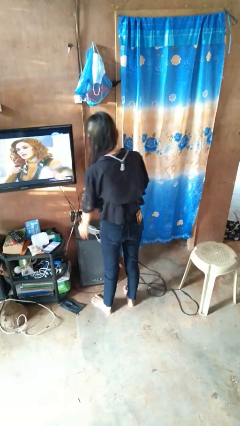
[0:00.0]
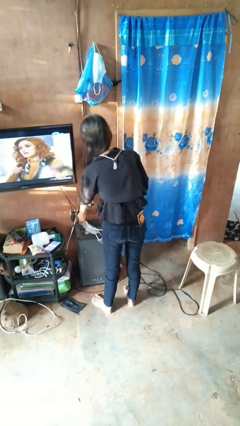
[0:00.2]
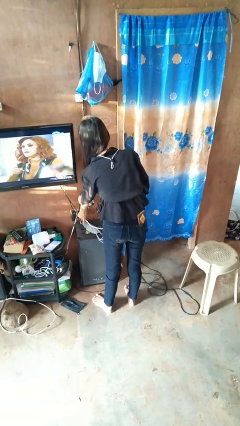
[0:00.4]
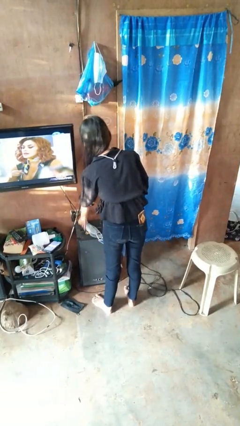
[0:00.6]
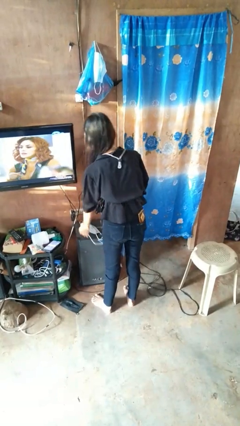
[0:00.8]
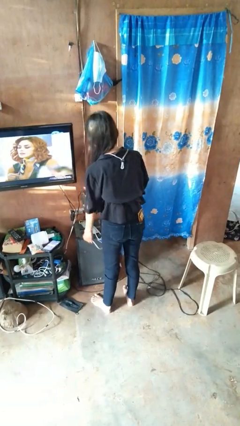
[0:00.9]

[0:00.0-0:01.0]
person unplugs from electrical socket

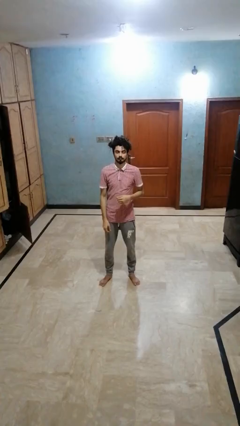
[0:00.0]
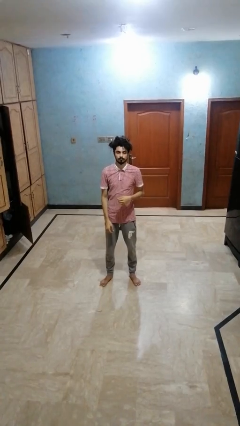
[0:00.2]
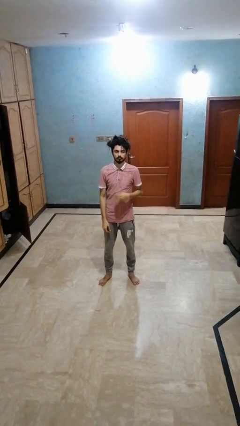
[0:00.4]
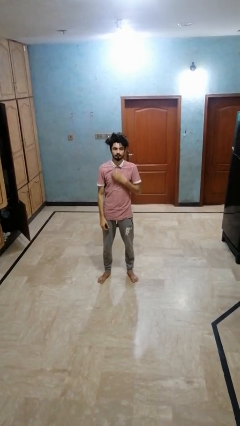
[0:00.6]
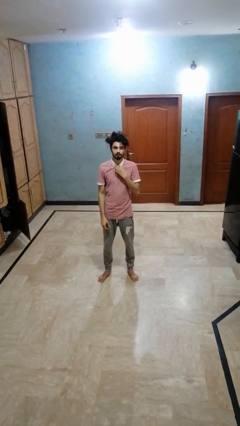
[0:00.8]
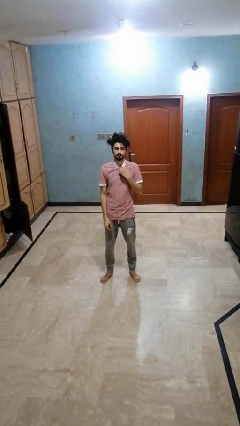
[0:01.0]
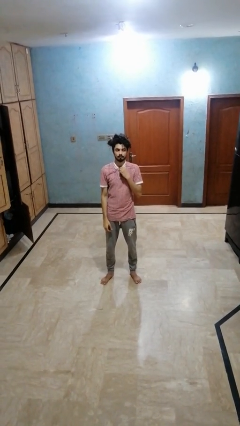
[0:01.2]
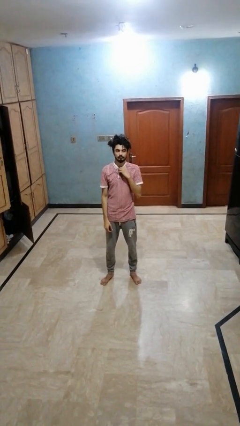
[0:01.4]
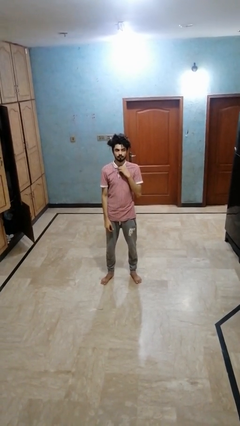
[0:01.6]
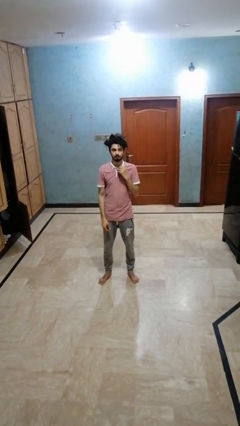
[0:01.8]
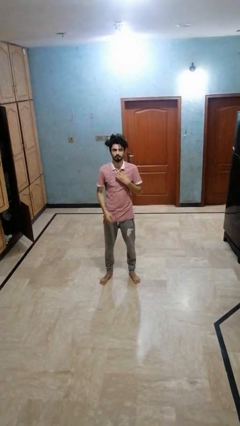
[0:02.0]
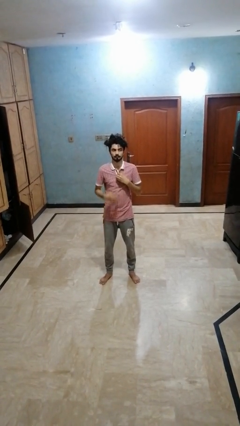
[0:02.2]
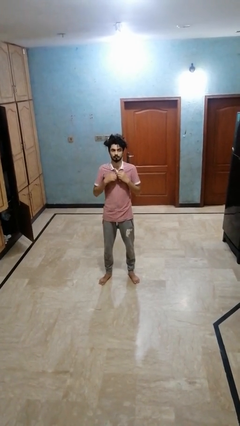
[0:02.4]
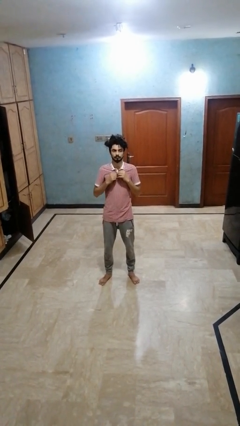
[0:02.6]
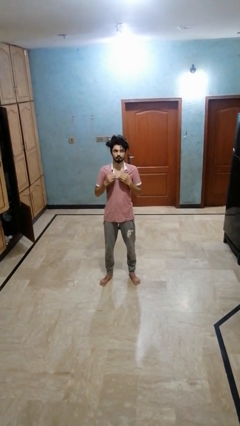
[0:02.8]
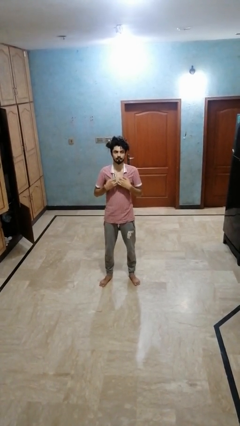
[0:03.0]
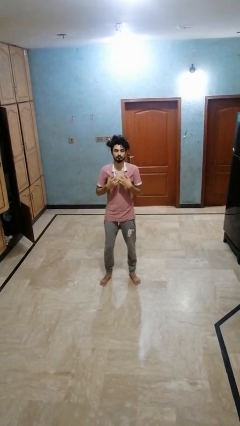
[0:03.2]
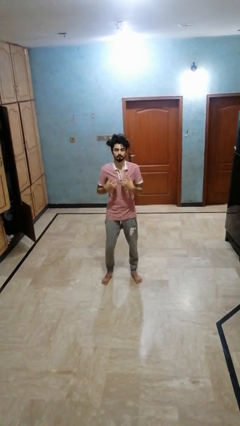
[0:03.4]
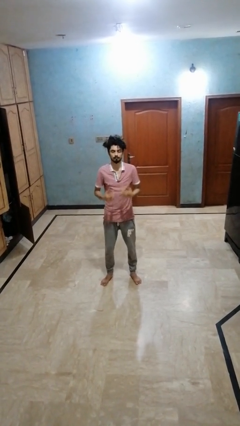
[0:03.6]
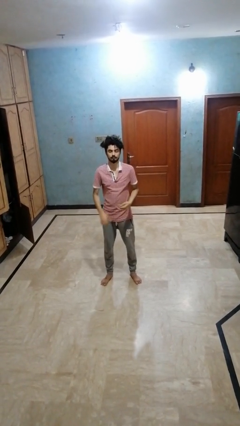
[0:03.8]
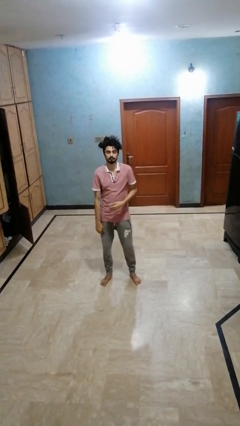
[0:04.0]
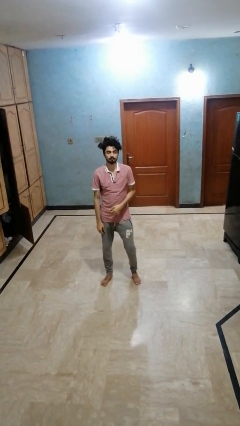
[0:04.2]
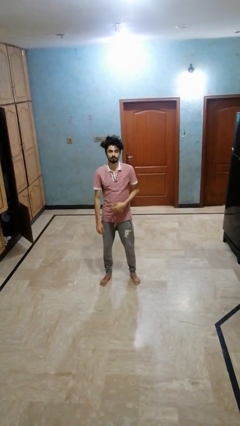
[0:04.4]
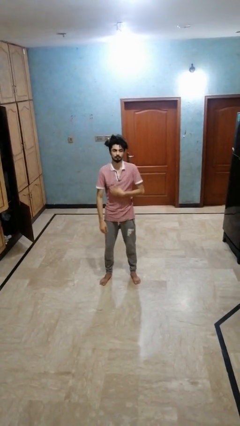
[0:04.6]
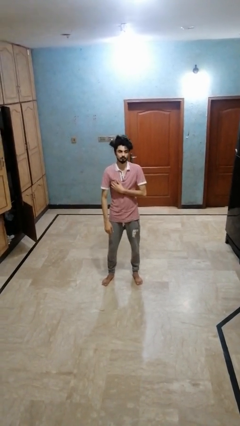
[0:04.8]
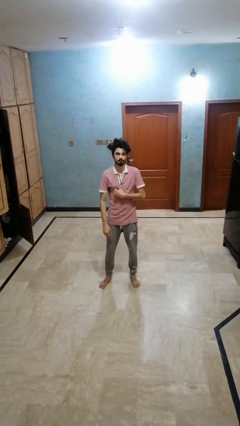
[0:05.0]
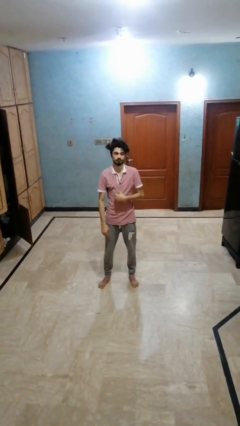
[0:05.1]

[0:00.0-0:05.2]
person unbuttons shirt

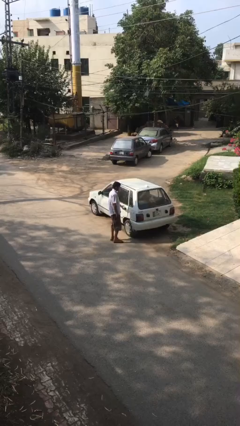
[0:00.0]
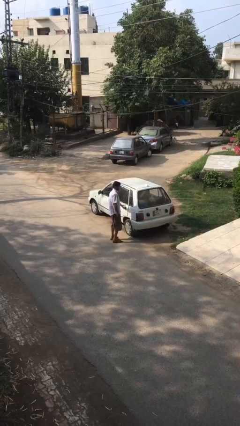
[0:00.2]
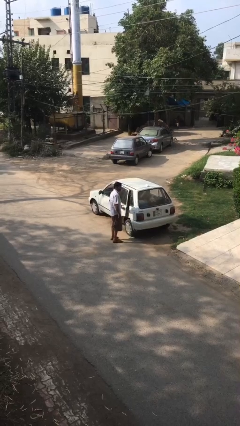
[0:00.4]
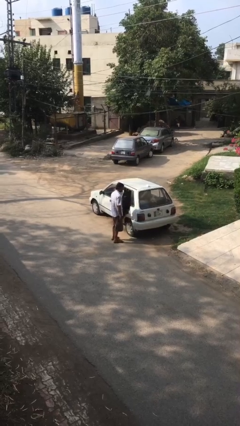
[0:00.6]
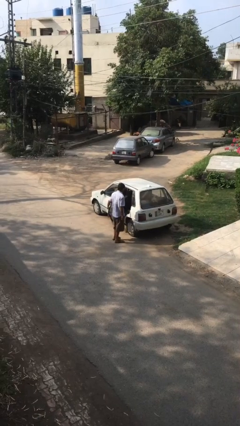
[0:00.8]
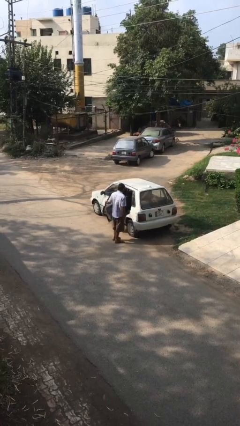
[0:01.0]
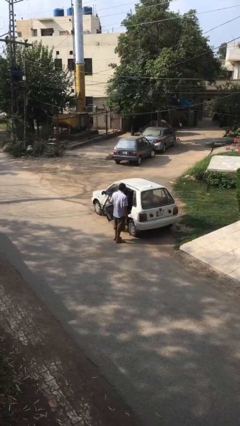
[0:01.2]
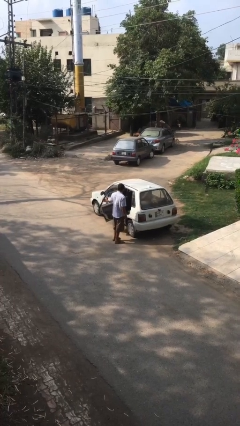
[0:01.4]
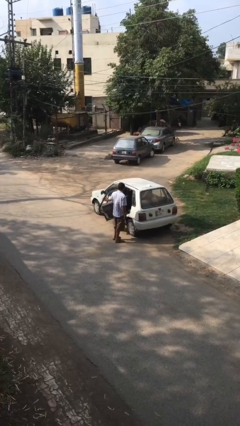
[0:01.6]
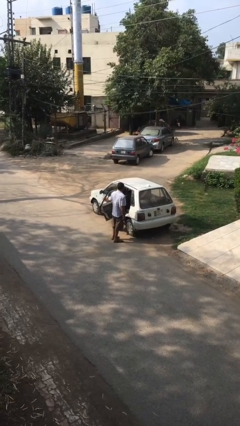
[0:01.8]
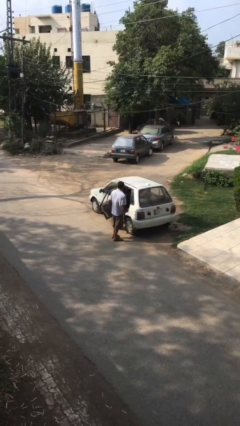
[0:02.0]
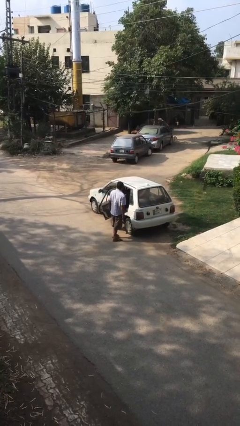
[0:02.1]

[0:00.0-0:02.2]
person opens car door

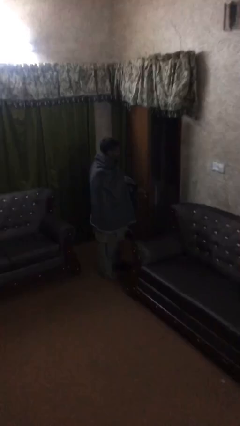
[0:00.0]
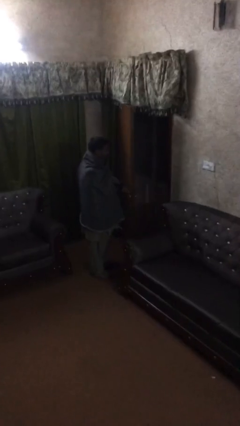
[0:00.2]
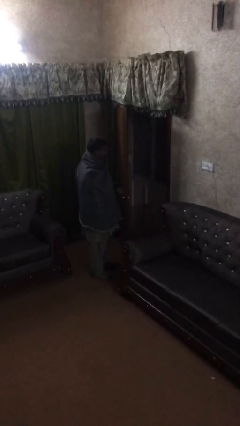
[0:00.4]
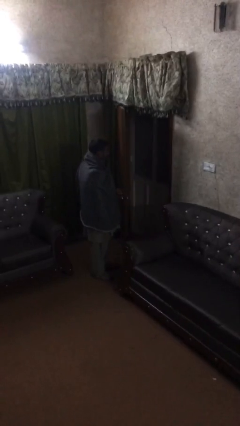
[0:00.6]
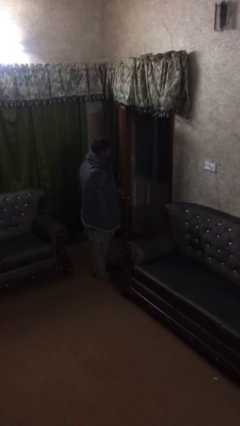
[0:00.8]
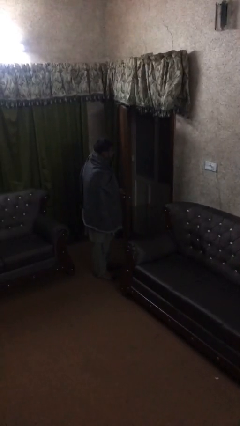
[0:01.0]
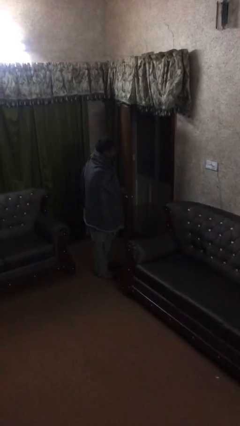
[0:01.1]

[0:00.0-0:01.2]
person opens facility door

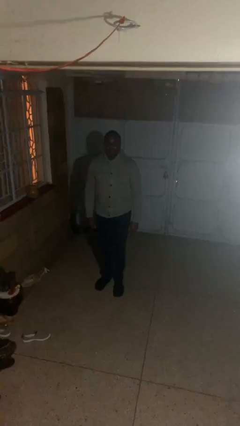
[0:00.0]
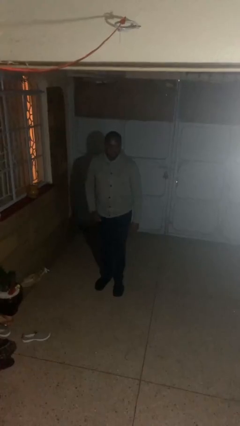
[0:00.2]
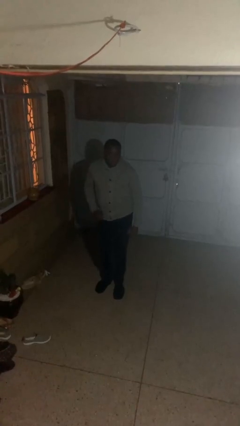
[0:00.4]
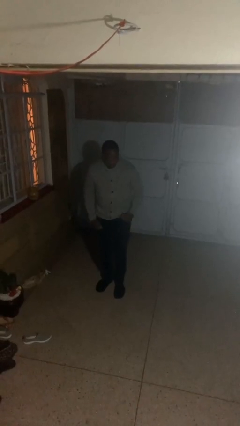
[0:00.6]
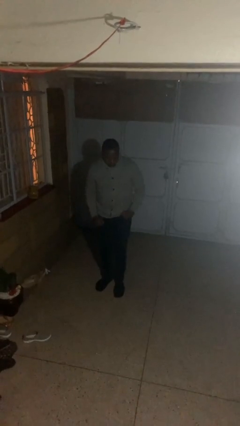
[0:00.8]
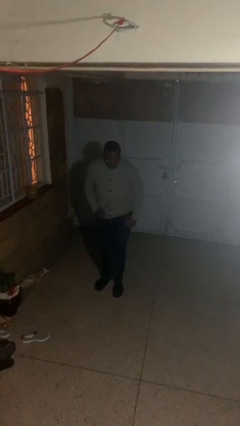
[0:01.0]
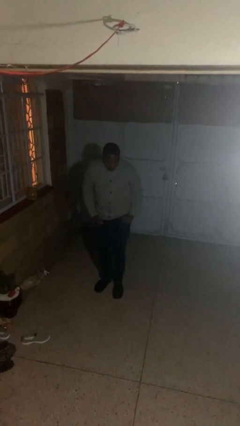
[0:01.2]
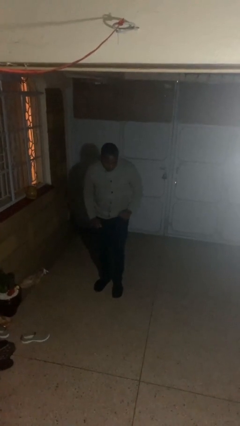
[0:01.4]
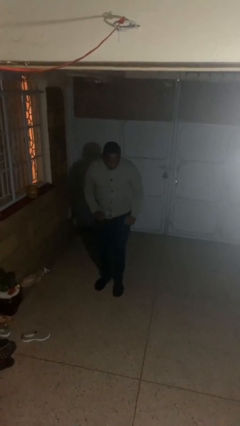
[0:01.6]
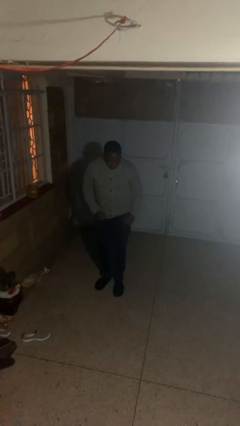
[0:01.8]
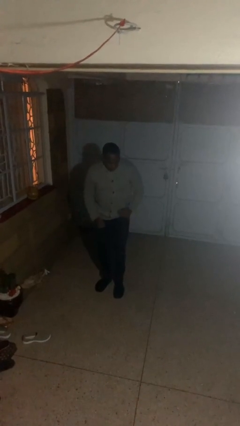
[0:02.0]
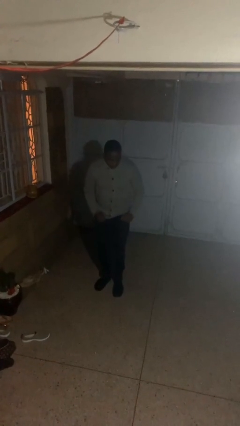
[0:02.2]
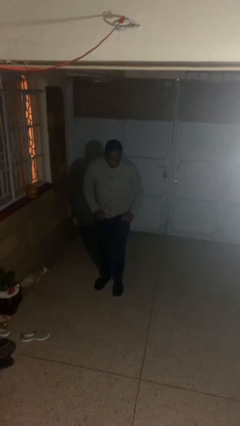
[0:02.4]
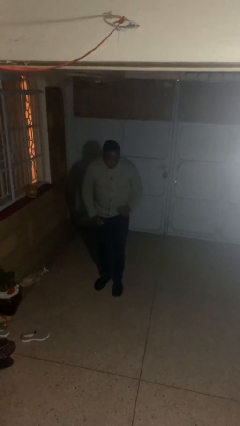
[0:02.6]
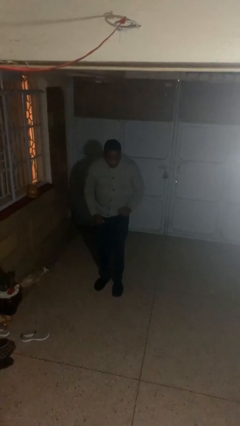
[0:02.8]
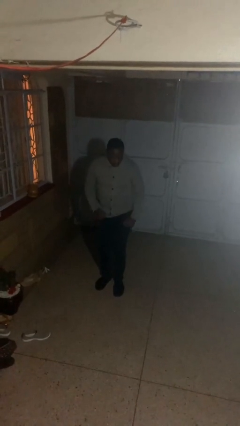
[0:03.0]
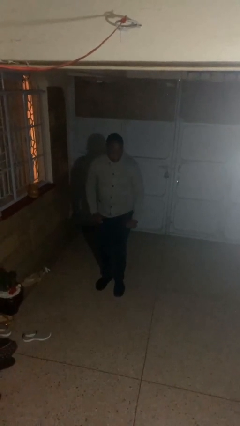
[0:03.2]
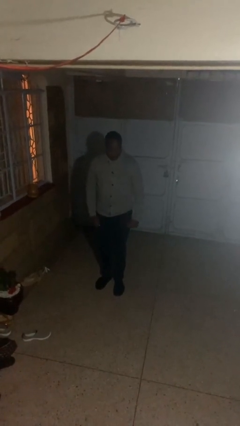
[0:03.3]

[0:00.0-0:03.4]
person dances in place

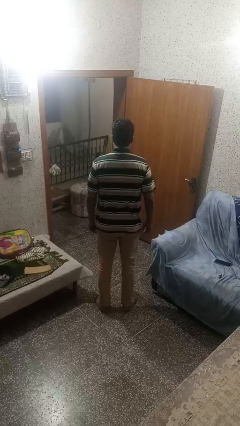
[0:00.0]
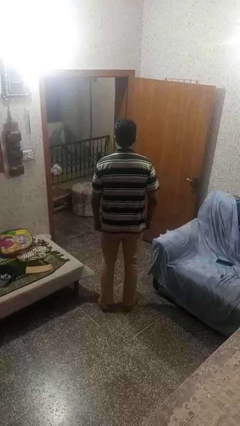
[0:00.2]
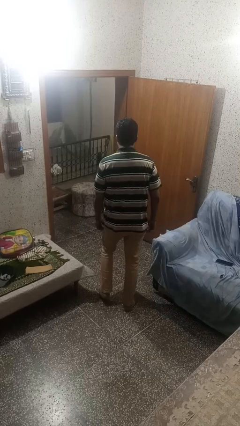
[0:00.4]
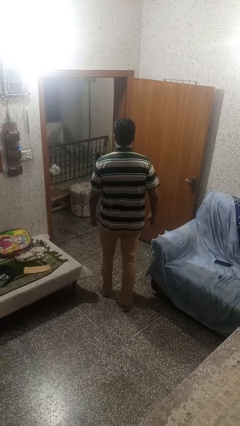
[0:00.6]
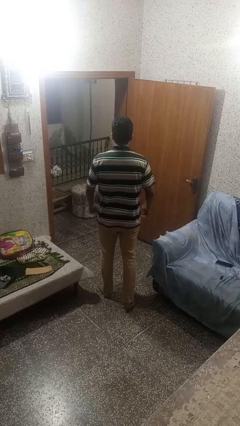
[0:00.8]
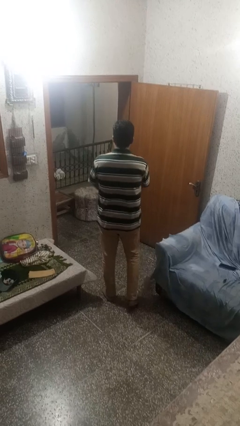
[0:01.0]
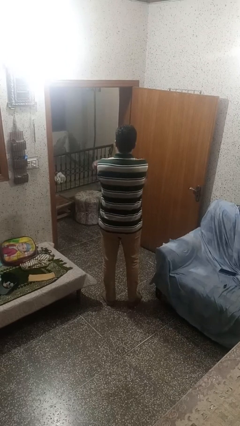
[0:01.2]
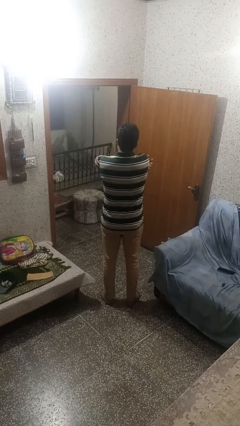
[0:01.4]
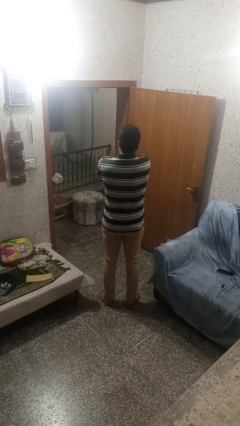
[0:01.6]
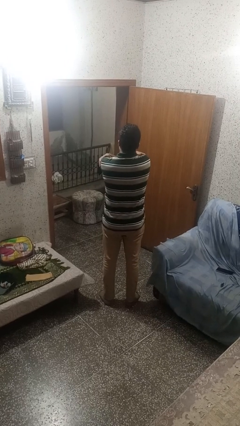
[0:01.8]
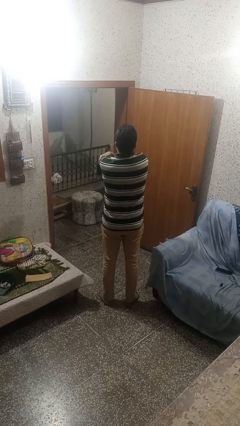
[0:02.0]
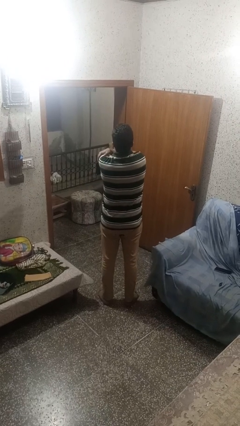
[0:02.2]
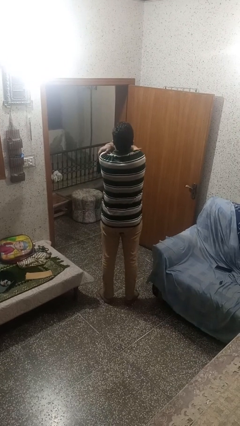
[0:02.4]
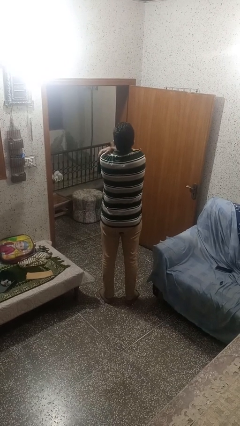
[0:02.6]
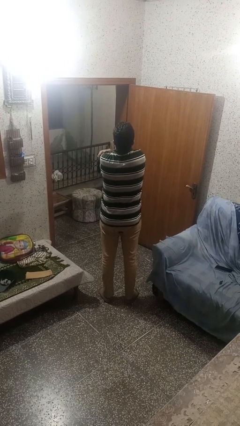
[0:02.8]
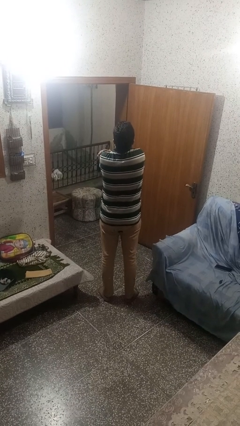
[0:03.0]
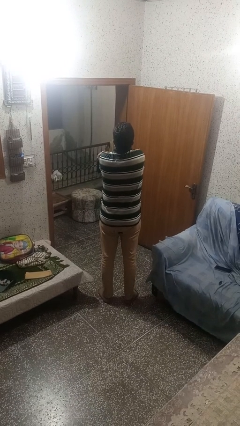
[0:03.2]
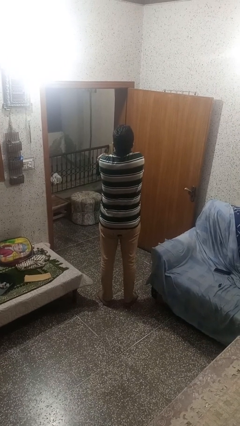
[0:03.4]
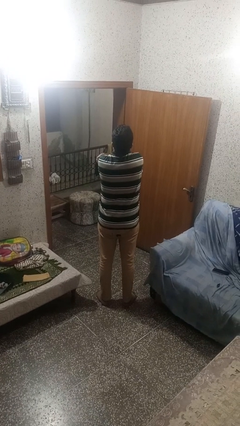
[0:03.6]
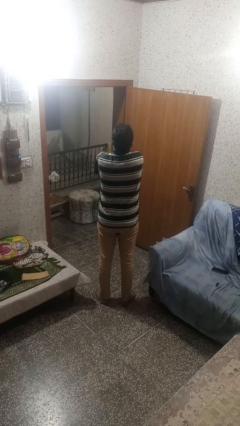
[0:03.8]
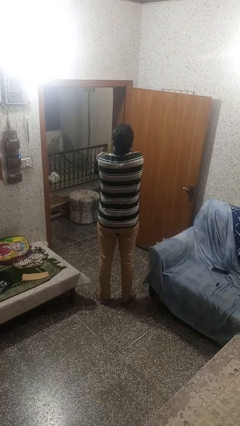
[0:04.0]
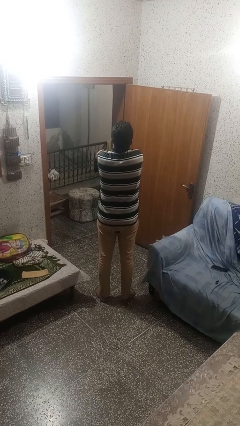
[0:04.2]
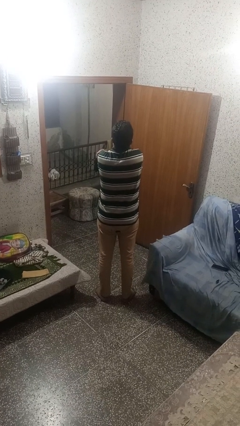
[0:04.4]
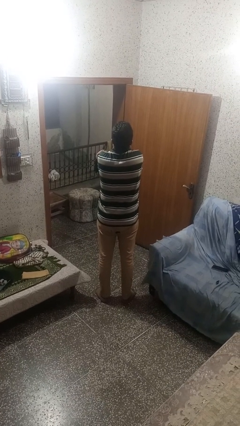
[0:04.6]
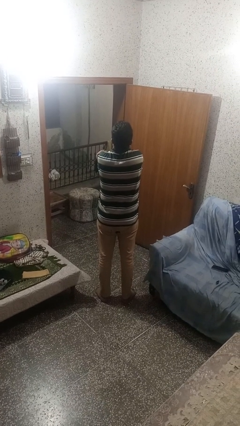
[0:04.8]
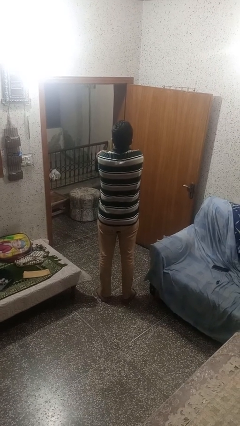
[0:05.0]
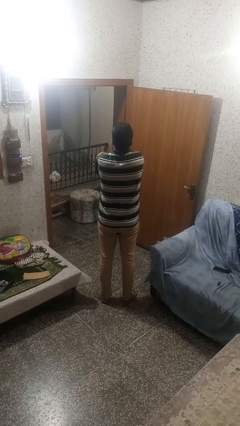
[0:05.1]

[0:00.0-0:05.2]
person crosses arms
